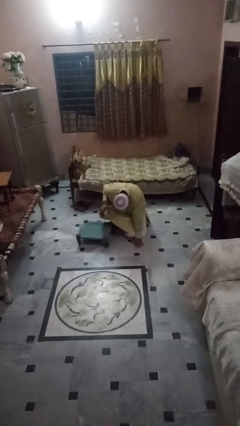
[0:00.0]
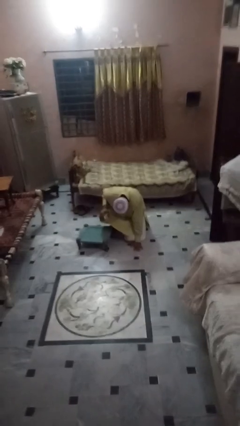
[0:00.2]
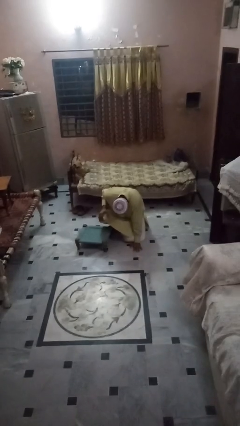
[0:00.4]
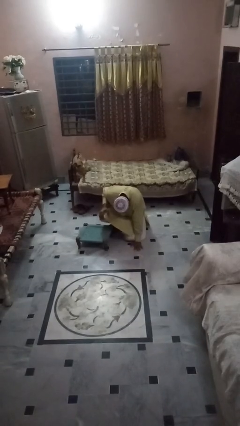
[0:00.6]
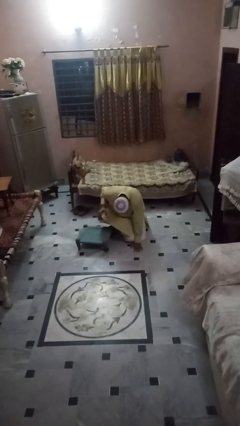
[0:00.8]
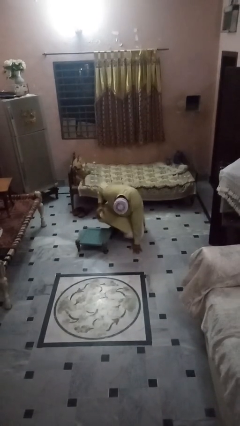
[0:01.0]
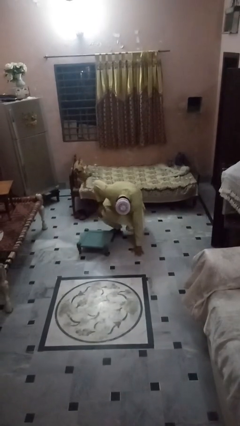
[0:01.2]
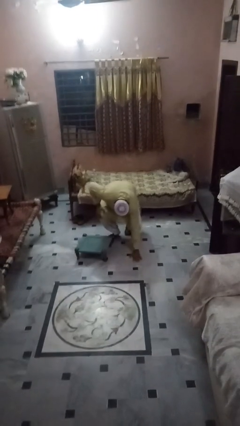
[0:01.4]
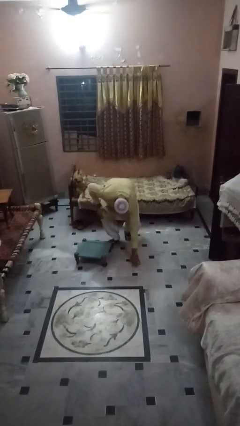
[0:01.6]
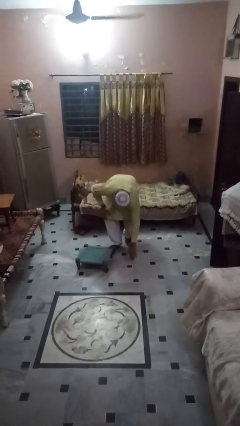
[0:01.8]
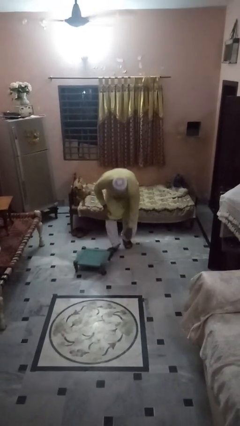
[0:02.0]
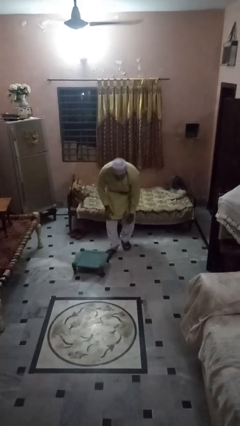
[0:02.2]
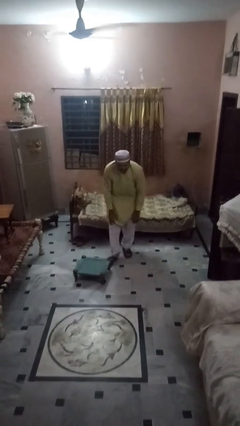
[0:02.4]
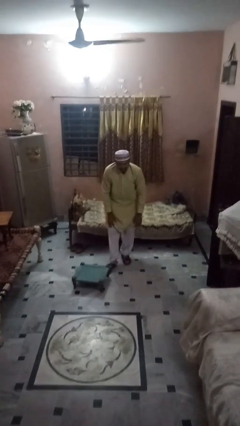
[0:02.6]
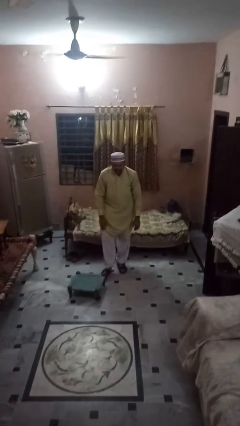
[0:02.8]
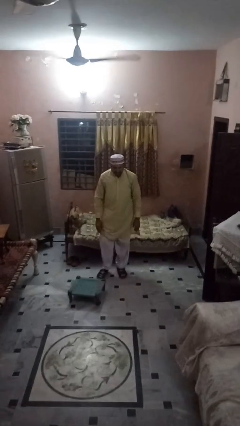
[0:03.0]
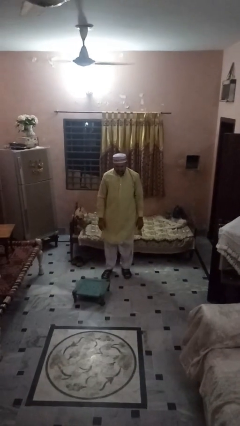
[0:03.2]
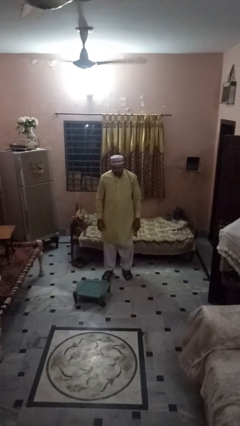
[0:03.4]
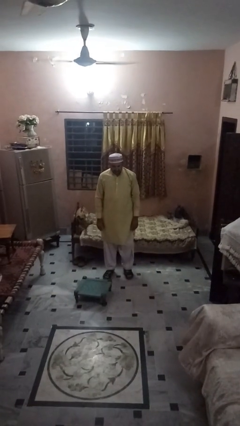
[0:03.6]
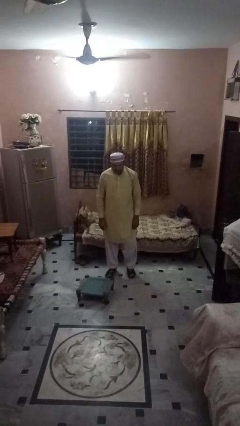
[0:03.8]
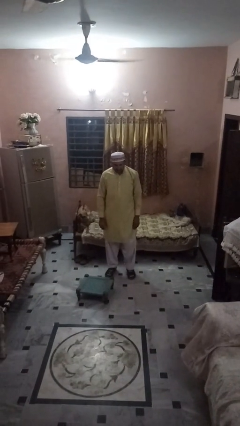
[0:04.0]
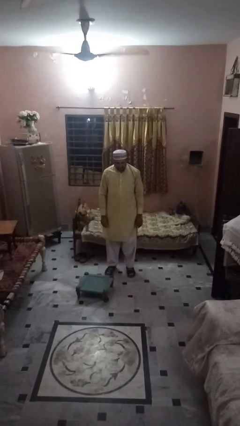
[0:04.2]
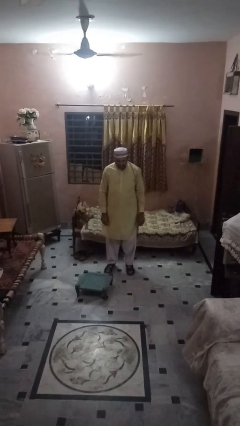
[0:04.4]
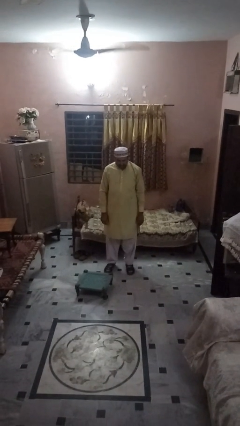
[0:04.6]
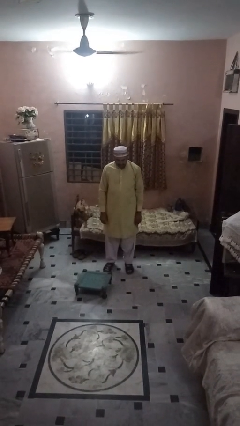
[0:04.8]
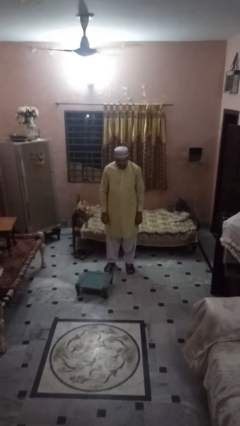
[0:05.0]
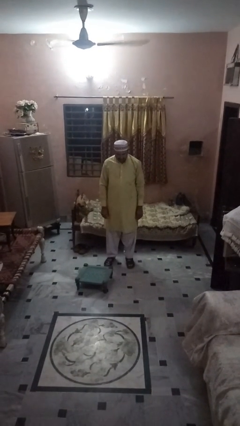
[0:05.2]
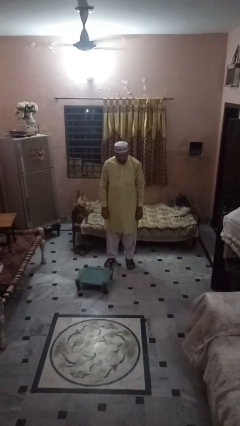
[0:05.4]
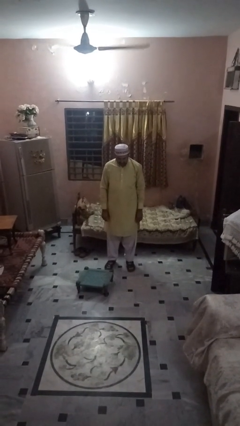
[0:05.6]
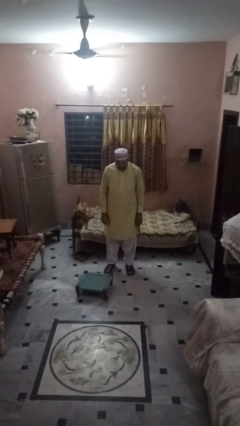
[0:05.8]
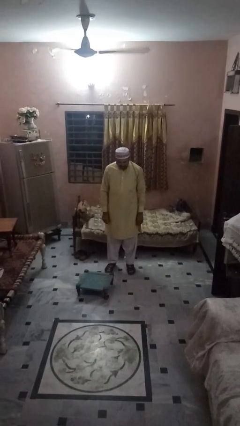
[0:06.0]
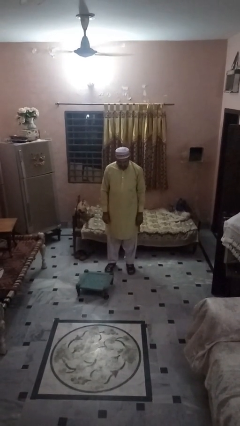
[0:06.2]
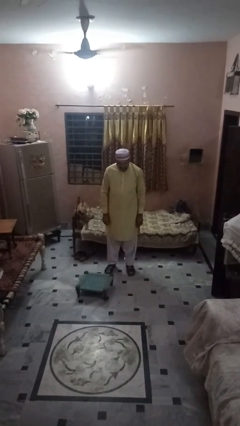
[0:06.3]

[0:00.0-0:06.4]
person stands up from floor

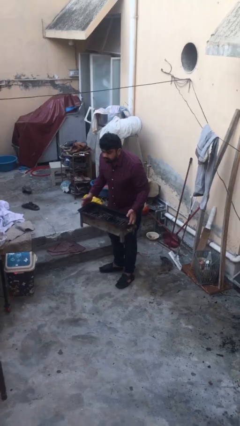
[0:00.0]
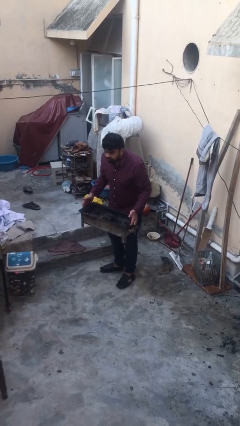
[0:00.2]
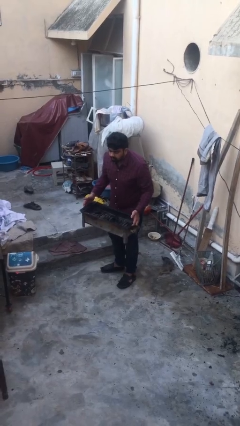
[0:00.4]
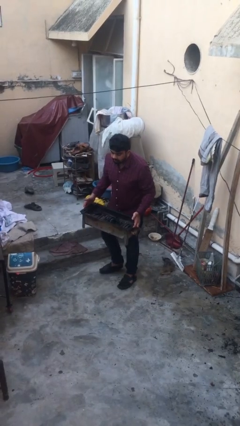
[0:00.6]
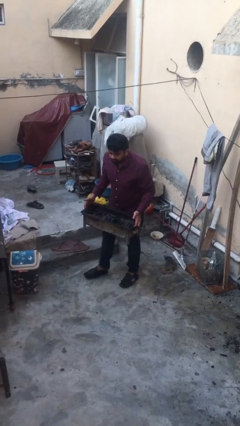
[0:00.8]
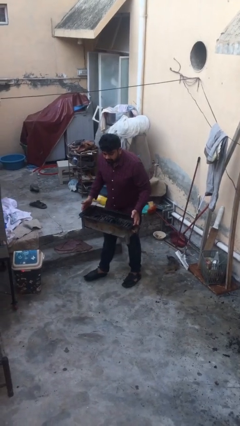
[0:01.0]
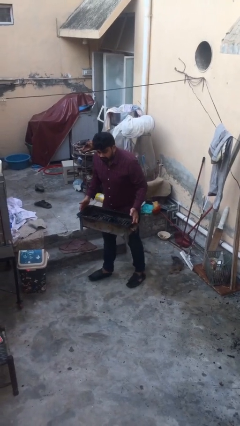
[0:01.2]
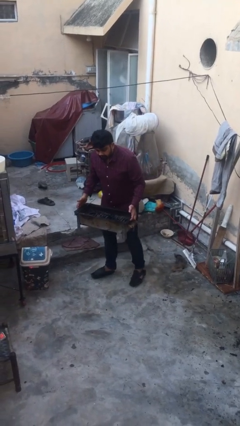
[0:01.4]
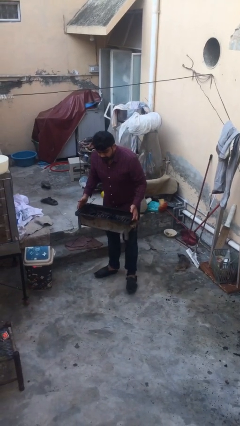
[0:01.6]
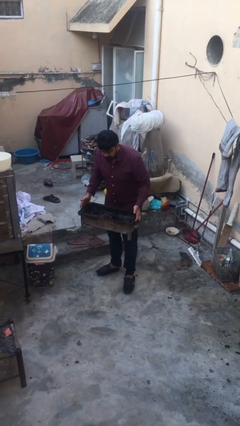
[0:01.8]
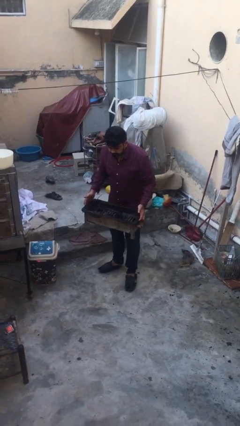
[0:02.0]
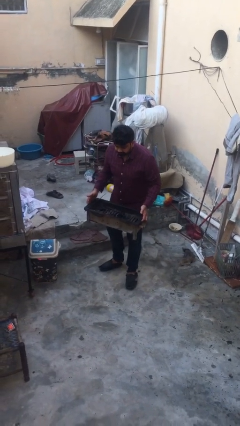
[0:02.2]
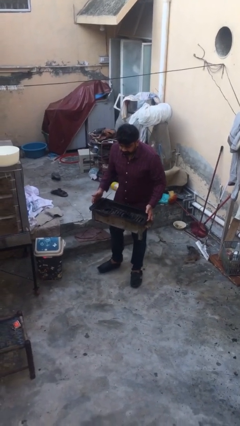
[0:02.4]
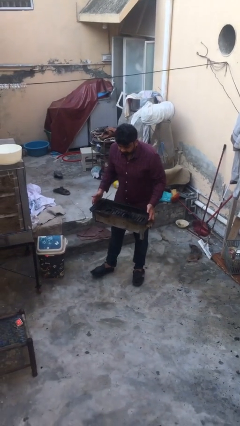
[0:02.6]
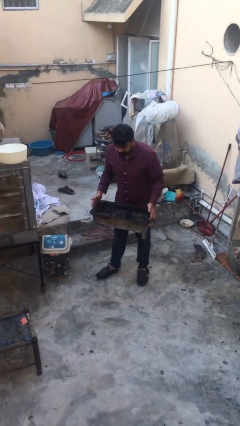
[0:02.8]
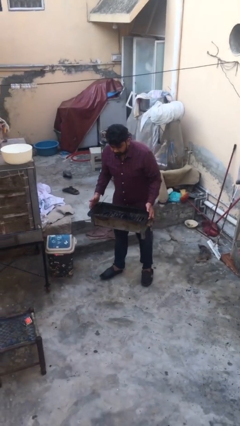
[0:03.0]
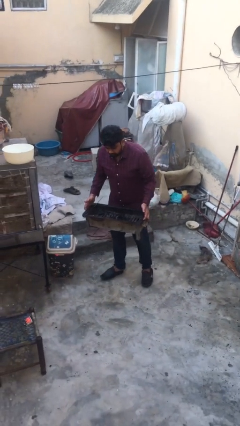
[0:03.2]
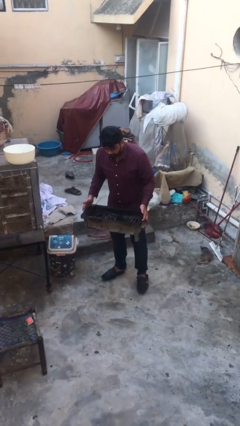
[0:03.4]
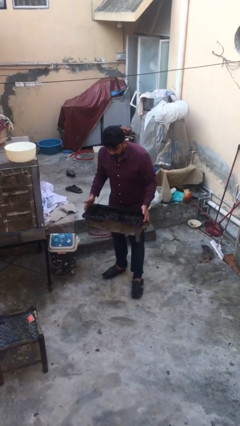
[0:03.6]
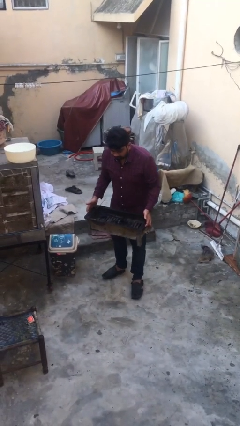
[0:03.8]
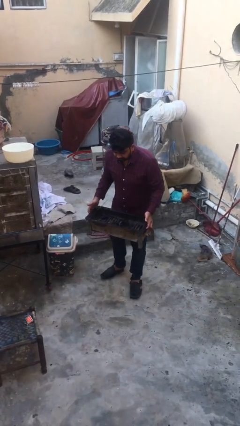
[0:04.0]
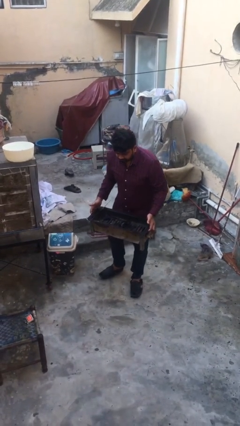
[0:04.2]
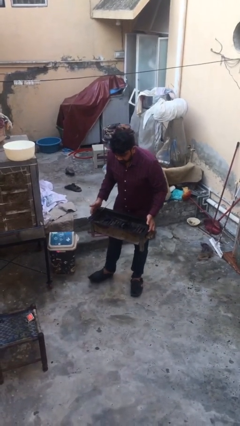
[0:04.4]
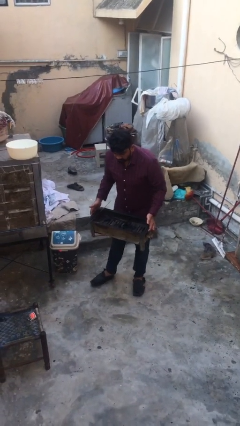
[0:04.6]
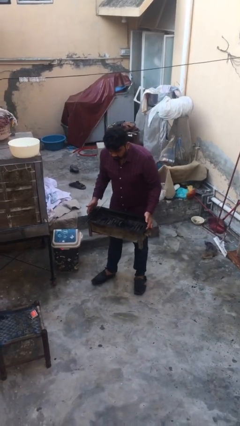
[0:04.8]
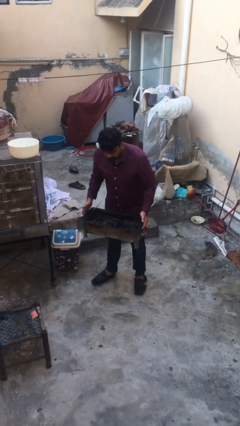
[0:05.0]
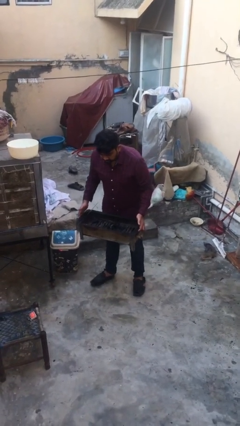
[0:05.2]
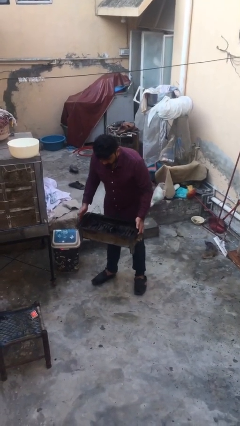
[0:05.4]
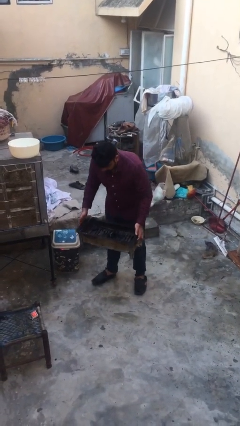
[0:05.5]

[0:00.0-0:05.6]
person carries heavy object

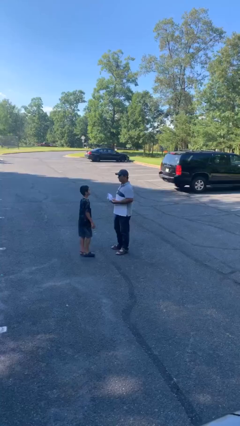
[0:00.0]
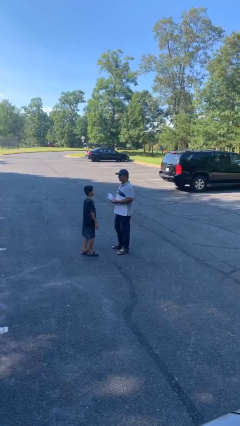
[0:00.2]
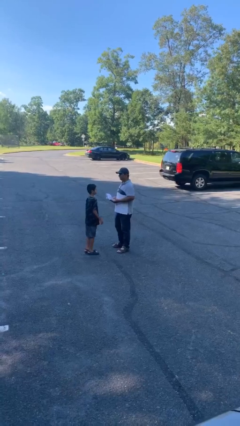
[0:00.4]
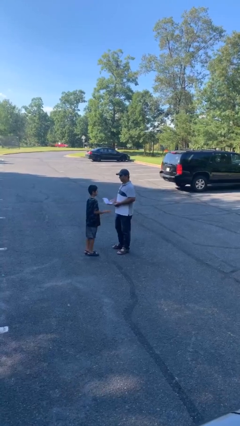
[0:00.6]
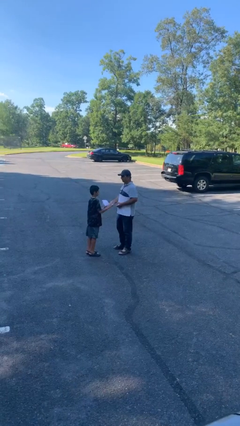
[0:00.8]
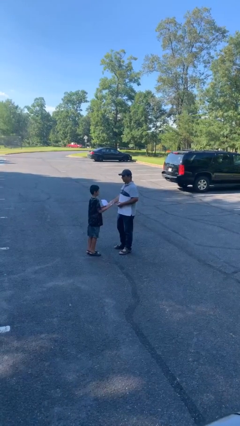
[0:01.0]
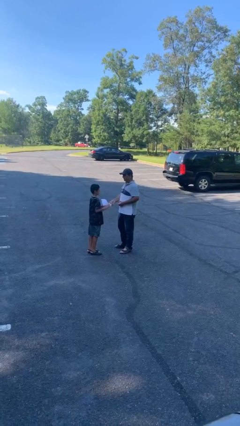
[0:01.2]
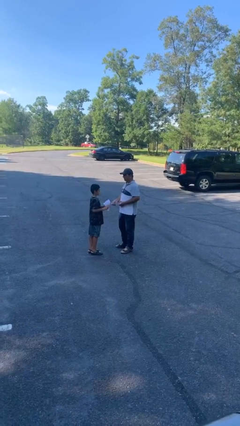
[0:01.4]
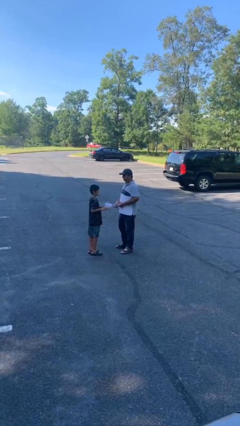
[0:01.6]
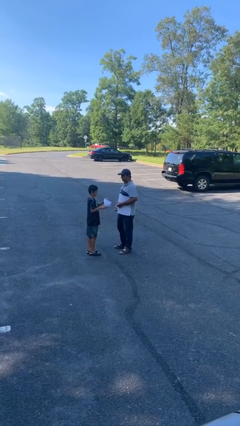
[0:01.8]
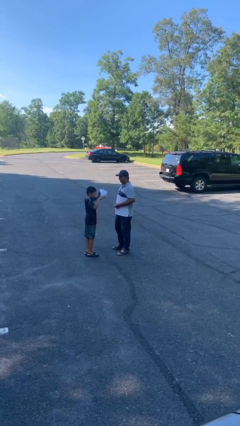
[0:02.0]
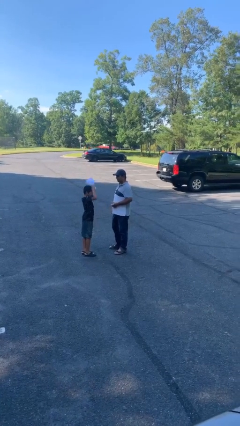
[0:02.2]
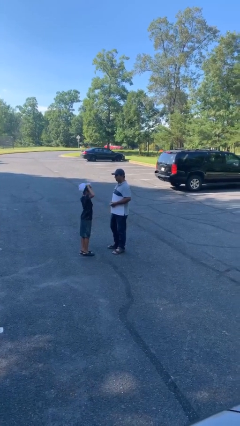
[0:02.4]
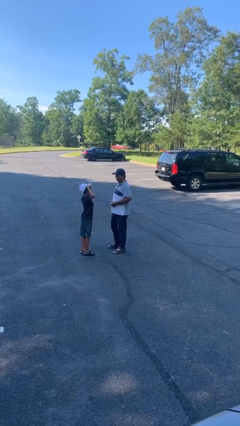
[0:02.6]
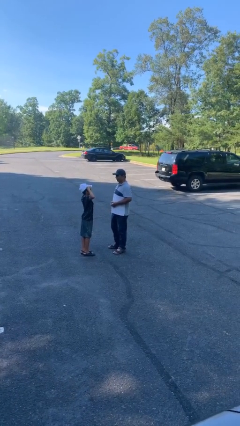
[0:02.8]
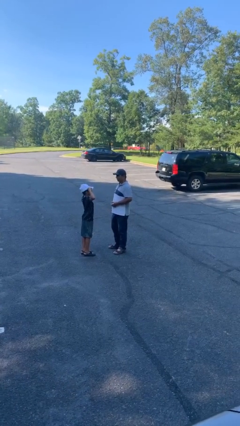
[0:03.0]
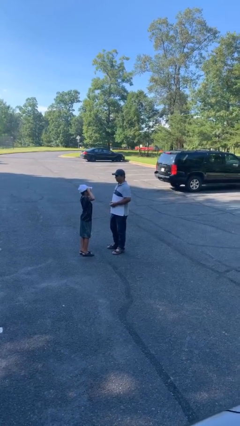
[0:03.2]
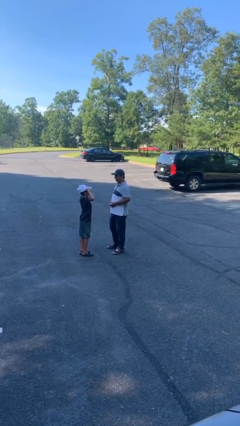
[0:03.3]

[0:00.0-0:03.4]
person transfers object to person

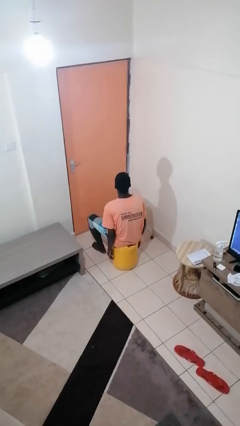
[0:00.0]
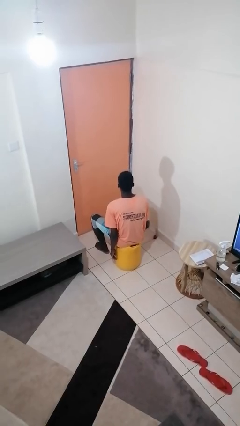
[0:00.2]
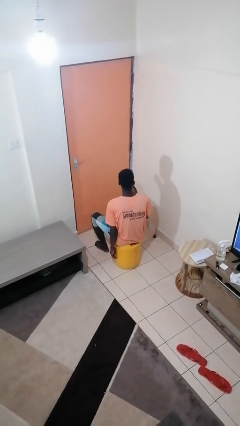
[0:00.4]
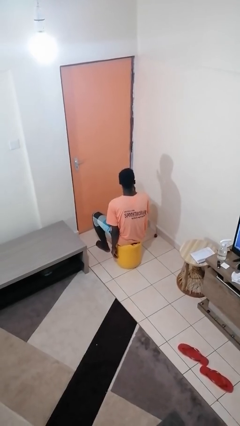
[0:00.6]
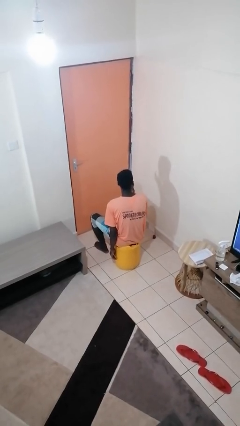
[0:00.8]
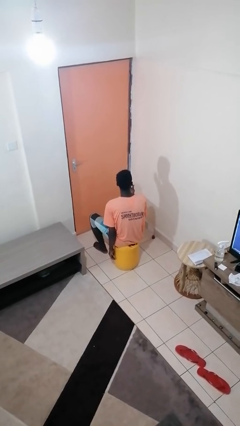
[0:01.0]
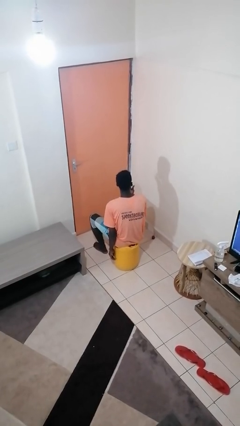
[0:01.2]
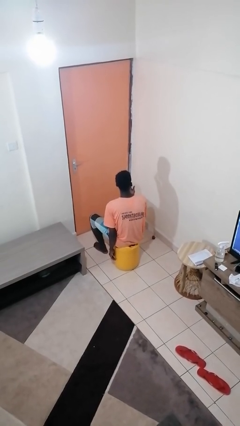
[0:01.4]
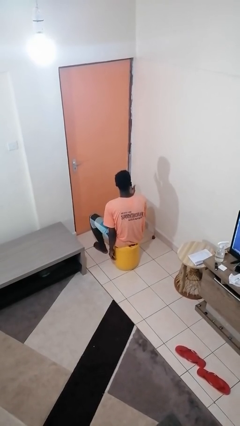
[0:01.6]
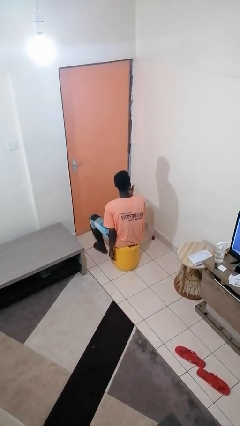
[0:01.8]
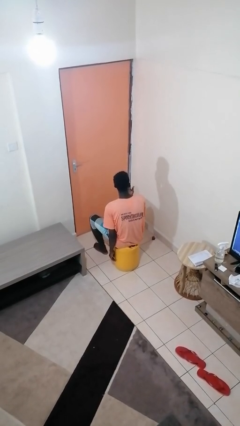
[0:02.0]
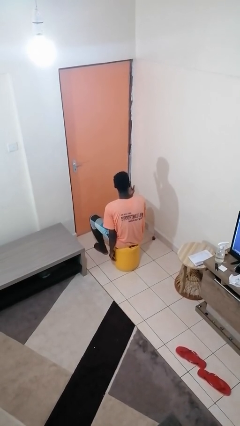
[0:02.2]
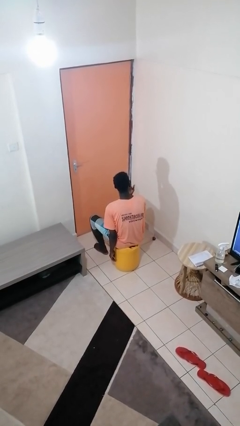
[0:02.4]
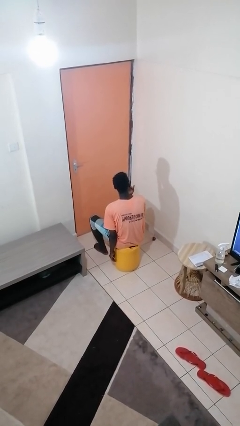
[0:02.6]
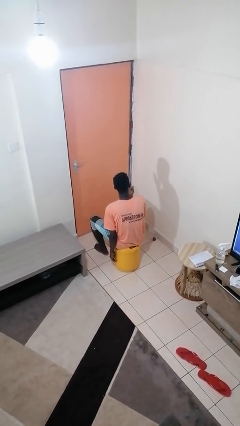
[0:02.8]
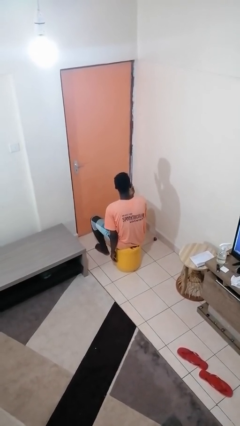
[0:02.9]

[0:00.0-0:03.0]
person licks fingers
